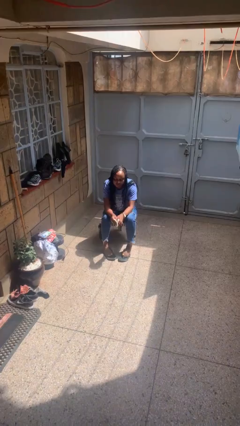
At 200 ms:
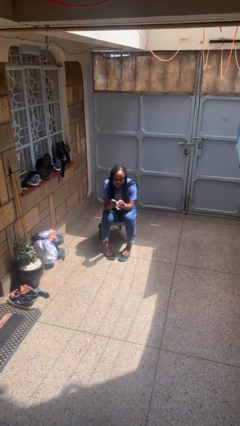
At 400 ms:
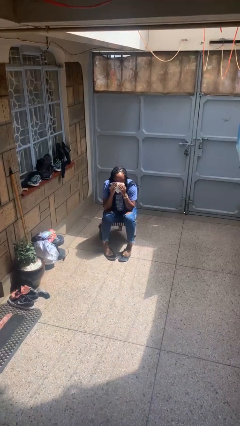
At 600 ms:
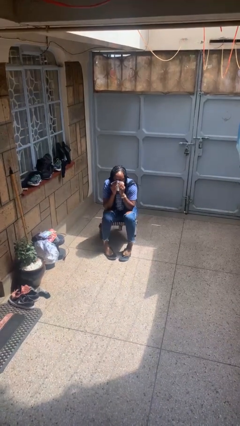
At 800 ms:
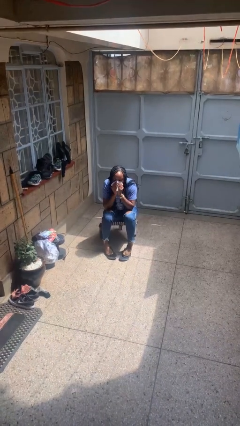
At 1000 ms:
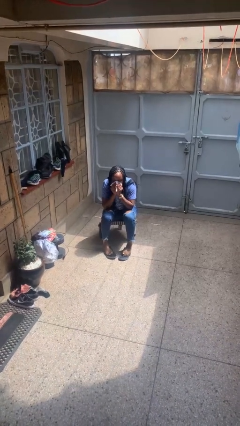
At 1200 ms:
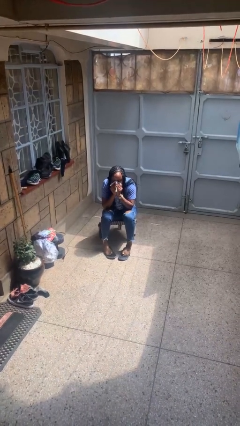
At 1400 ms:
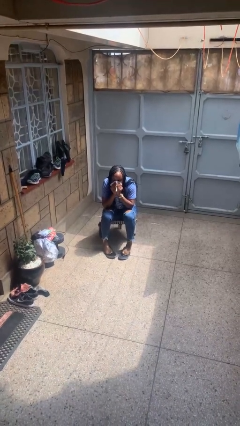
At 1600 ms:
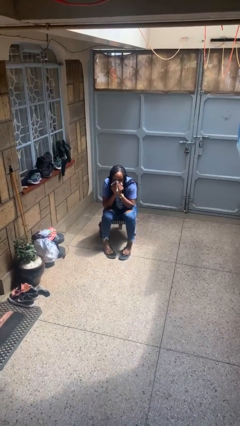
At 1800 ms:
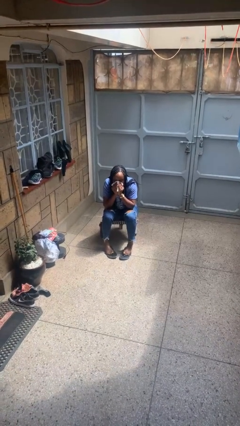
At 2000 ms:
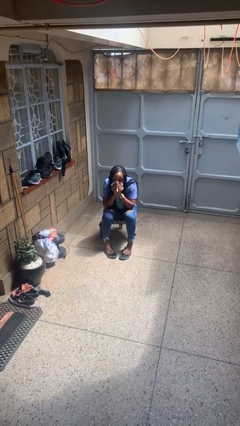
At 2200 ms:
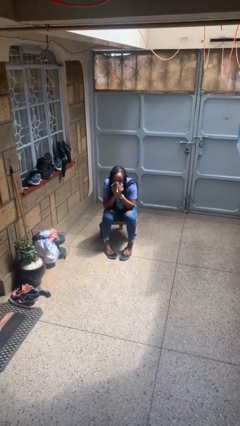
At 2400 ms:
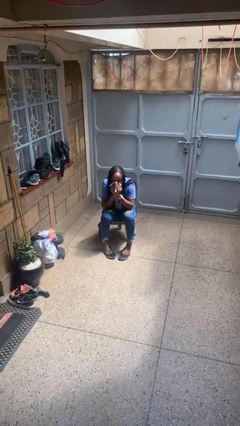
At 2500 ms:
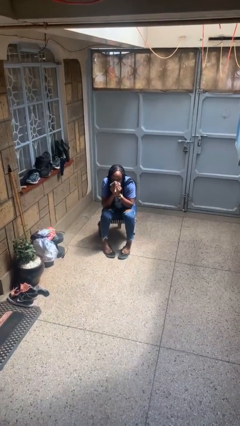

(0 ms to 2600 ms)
person blows nose

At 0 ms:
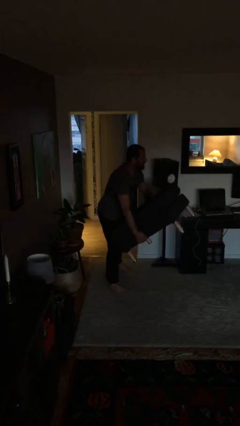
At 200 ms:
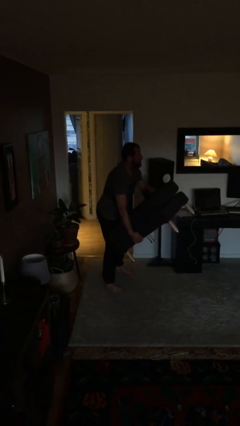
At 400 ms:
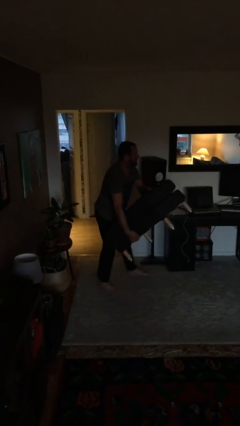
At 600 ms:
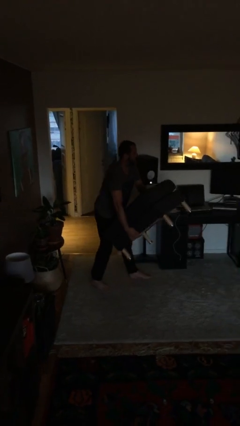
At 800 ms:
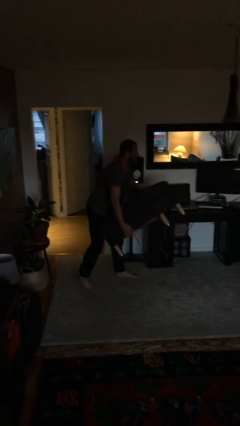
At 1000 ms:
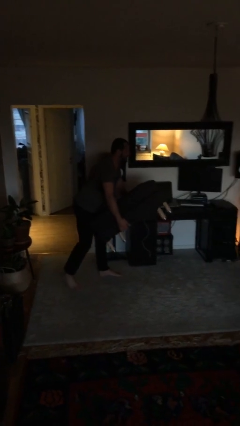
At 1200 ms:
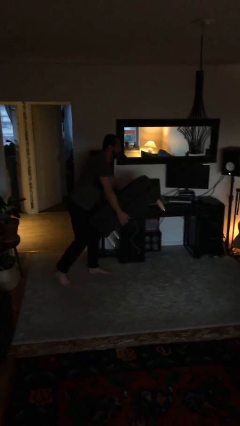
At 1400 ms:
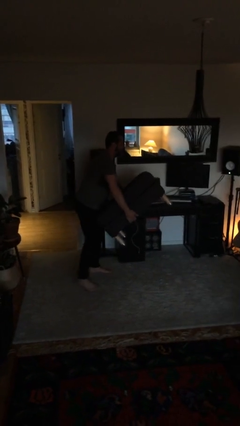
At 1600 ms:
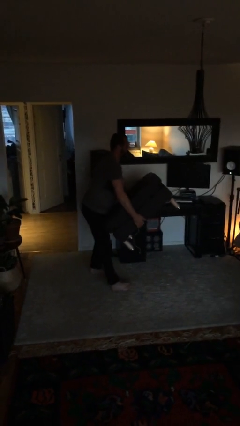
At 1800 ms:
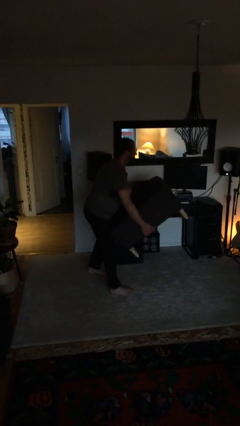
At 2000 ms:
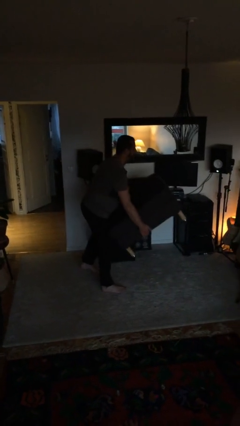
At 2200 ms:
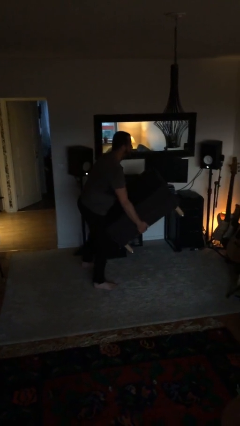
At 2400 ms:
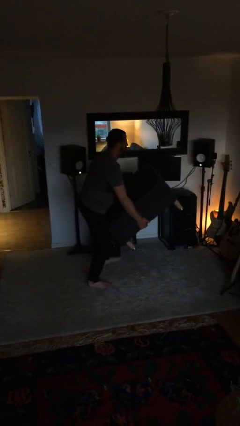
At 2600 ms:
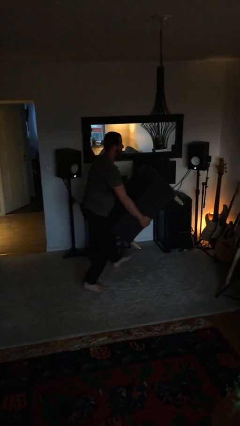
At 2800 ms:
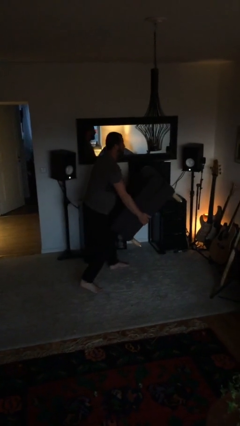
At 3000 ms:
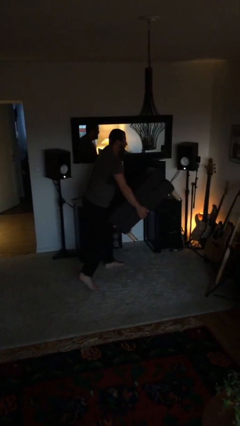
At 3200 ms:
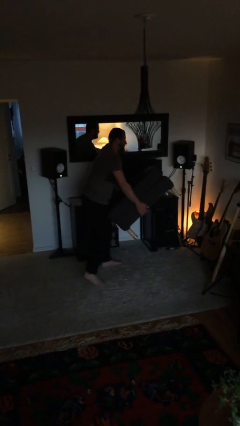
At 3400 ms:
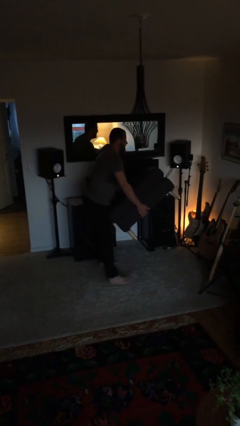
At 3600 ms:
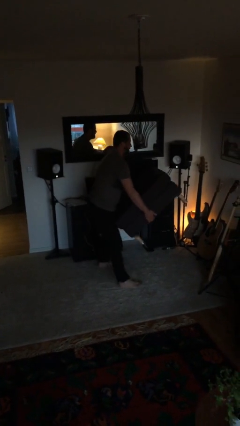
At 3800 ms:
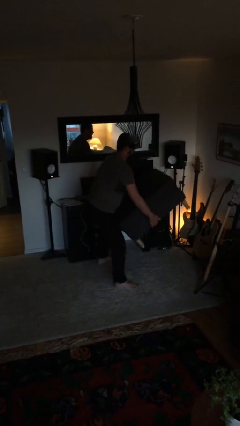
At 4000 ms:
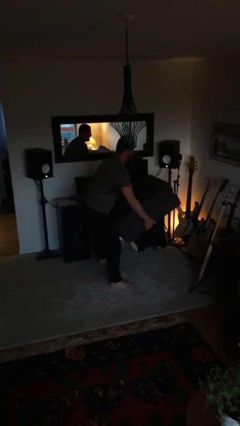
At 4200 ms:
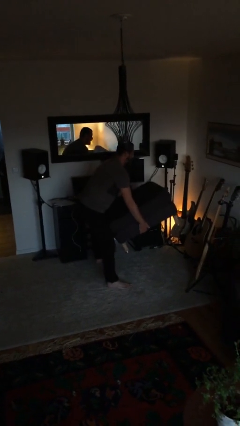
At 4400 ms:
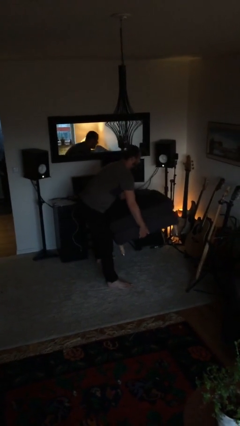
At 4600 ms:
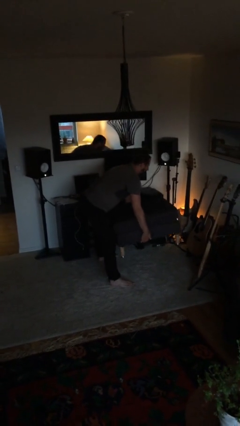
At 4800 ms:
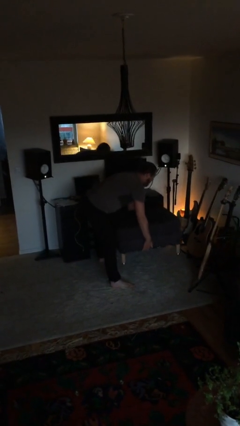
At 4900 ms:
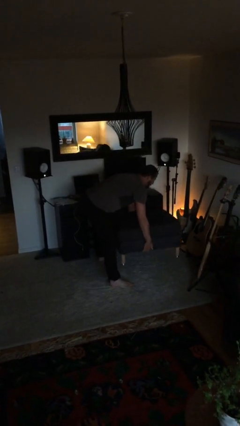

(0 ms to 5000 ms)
person carries heavy object

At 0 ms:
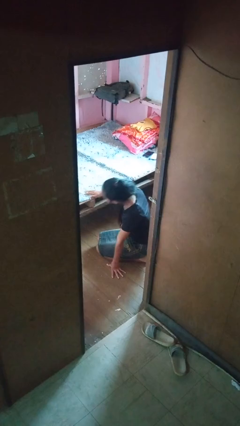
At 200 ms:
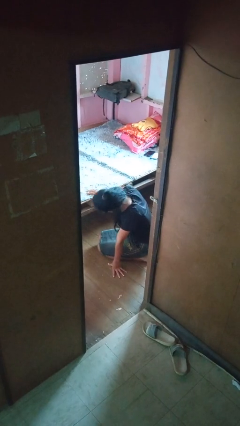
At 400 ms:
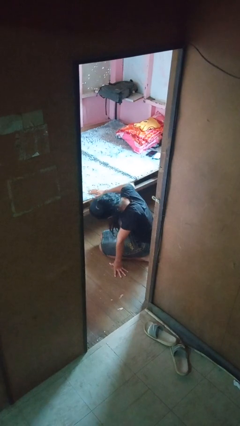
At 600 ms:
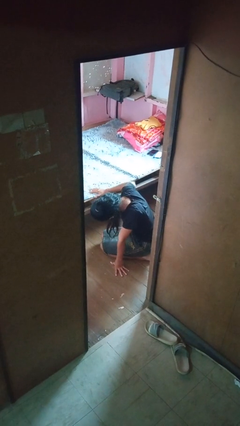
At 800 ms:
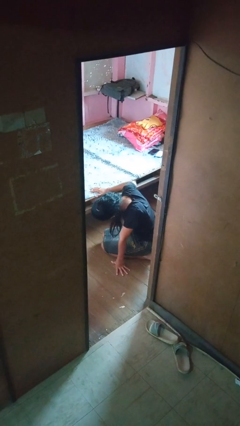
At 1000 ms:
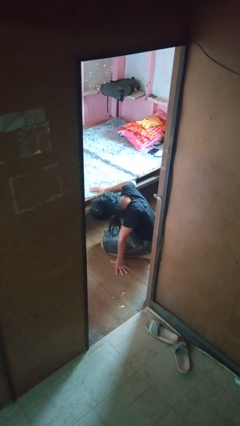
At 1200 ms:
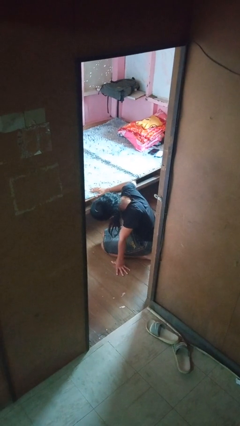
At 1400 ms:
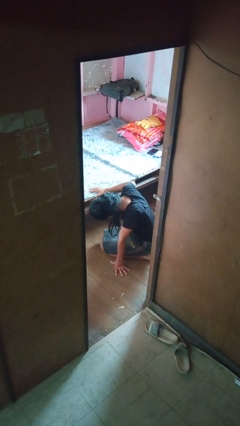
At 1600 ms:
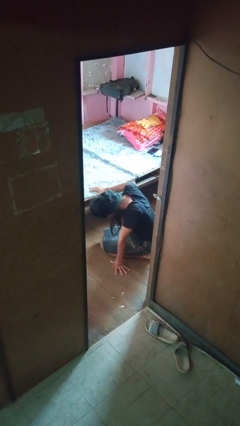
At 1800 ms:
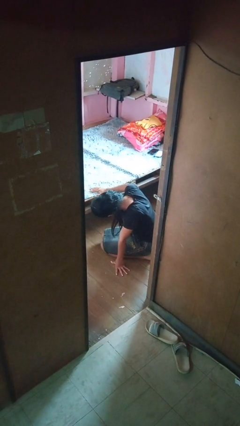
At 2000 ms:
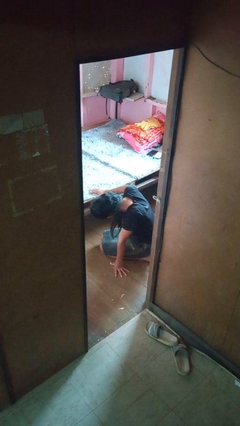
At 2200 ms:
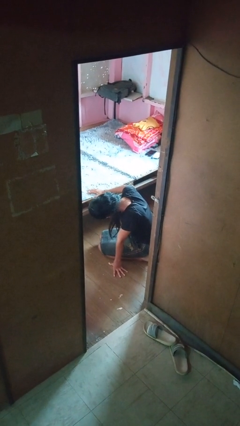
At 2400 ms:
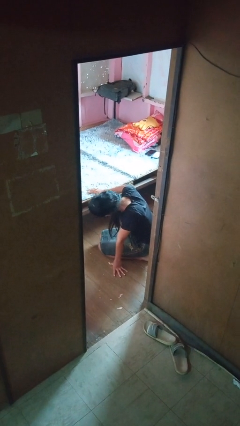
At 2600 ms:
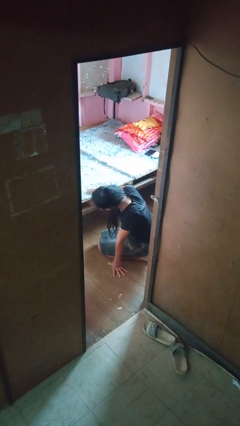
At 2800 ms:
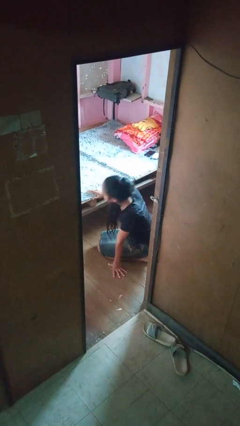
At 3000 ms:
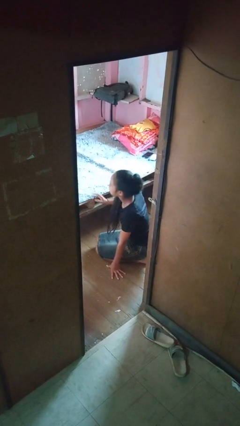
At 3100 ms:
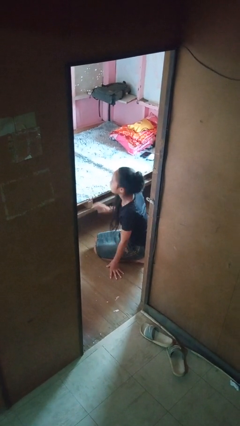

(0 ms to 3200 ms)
person searches under bed

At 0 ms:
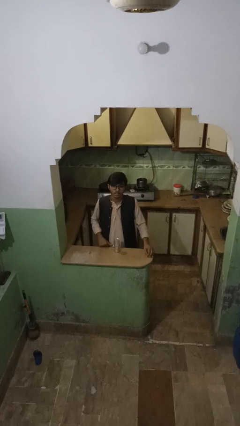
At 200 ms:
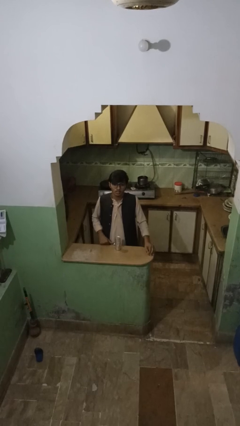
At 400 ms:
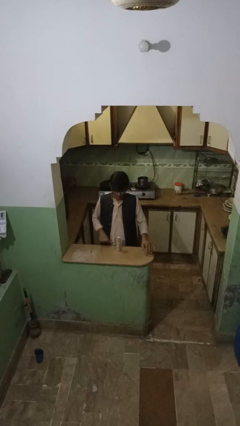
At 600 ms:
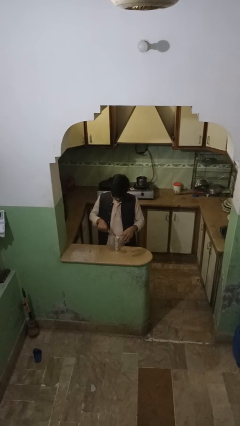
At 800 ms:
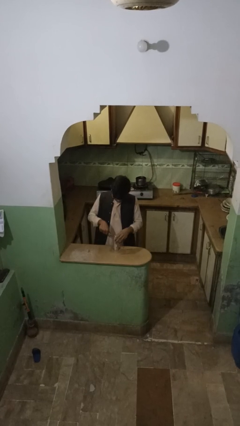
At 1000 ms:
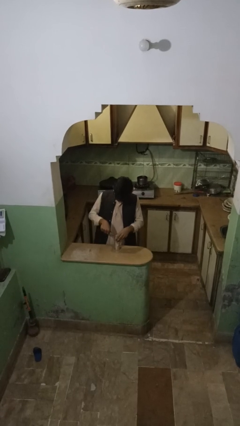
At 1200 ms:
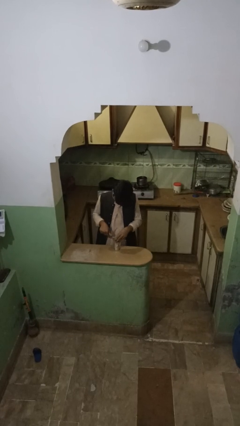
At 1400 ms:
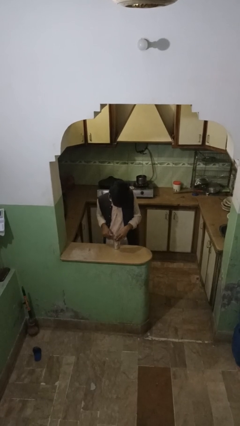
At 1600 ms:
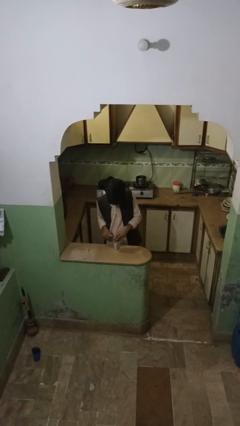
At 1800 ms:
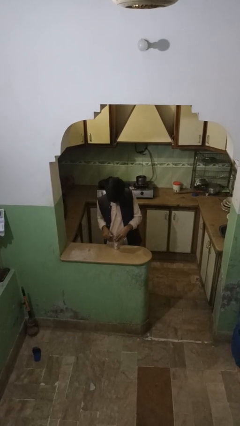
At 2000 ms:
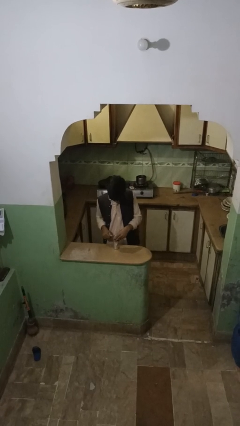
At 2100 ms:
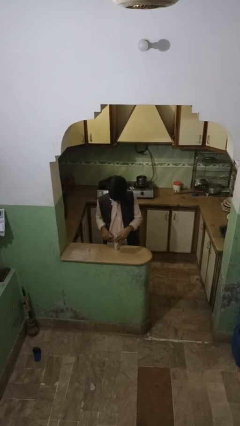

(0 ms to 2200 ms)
person opens can with can opener

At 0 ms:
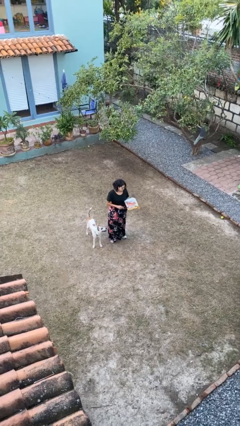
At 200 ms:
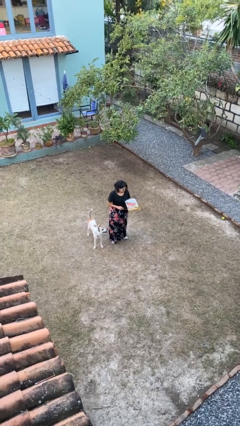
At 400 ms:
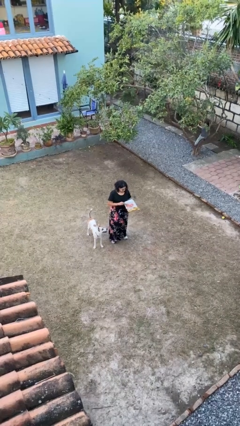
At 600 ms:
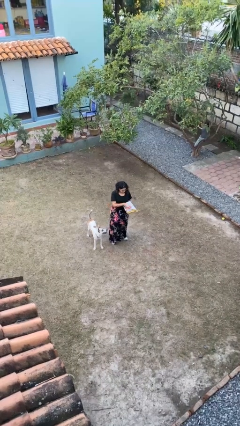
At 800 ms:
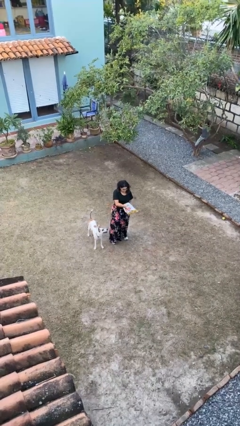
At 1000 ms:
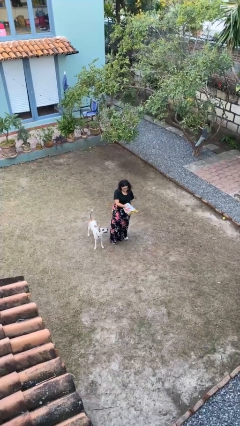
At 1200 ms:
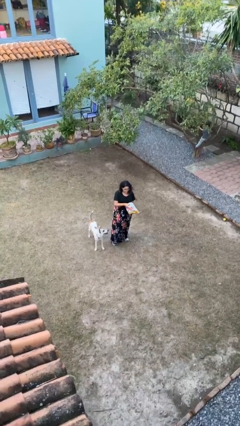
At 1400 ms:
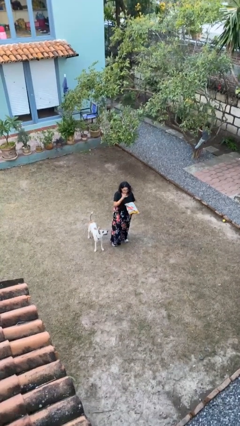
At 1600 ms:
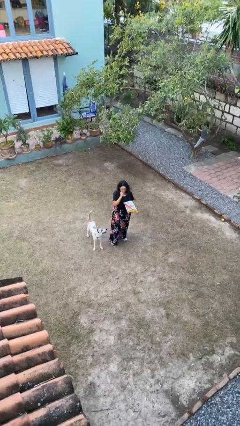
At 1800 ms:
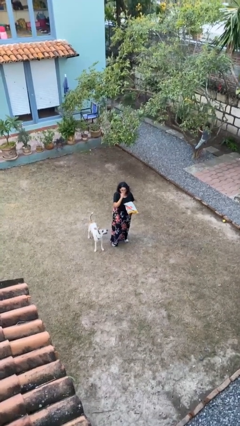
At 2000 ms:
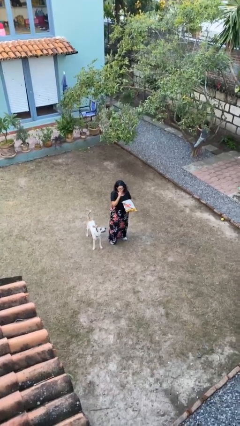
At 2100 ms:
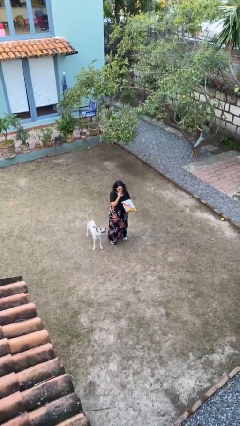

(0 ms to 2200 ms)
person eats snack from bag

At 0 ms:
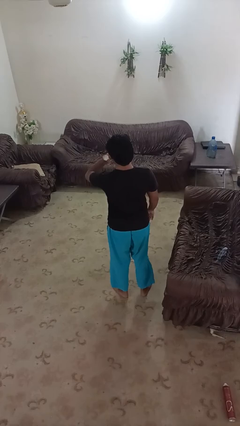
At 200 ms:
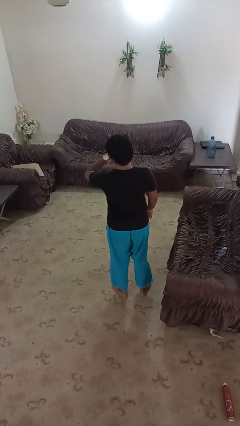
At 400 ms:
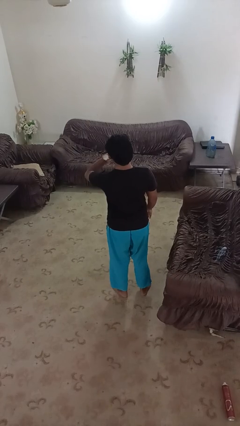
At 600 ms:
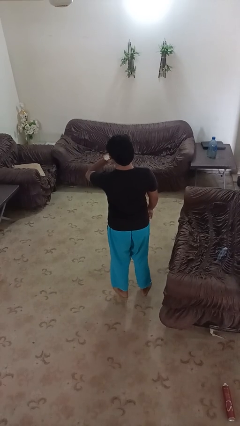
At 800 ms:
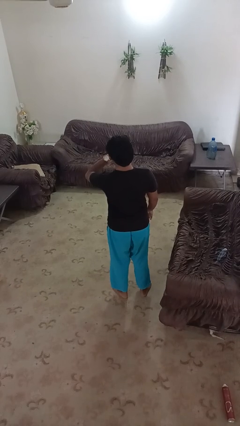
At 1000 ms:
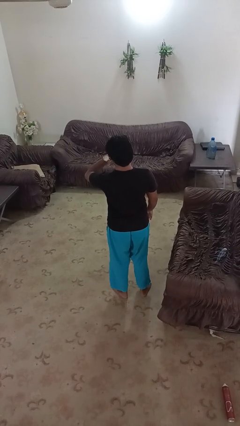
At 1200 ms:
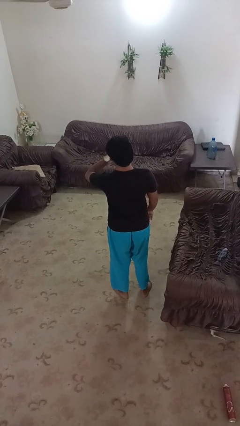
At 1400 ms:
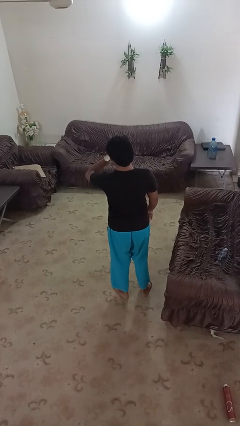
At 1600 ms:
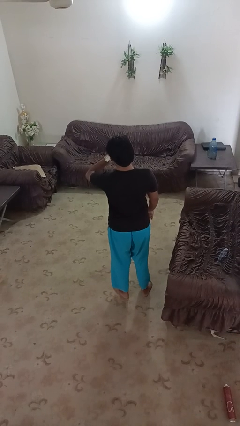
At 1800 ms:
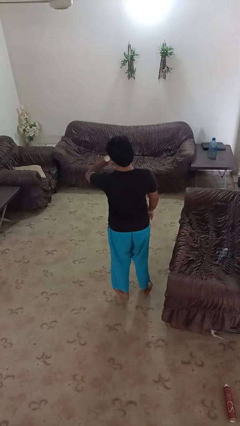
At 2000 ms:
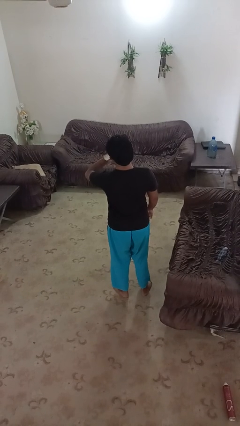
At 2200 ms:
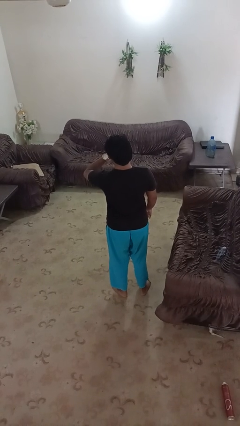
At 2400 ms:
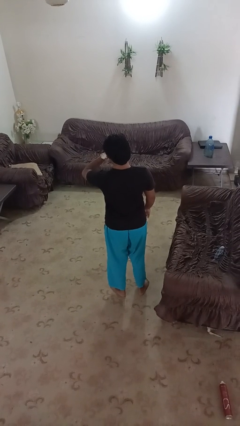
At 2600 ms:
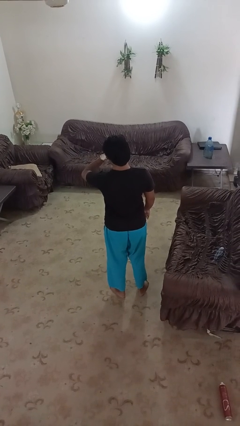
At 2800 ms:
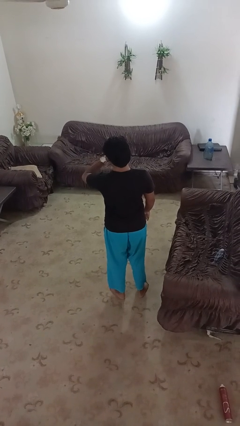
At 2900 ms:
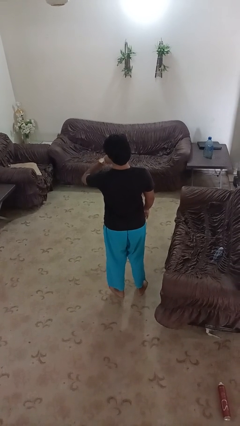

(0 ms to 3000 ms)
person looks at wristwatch
